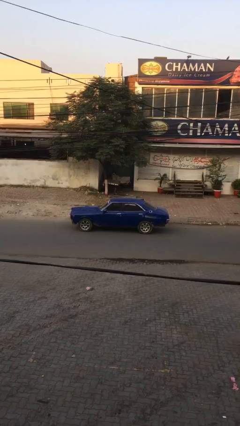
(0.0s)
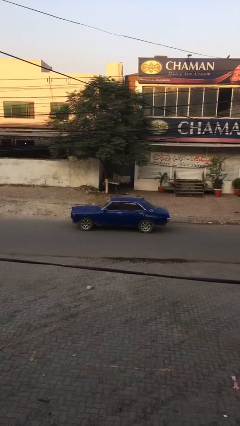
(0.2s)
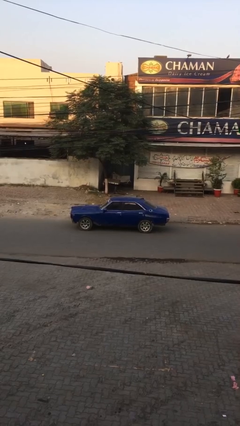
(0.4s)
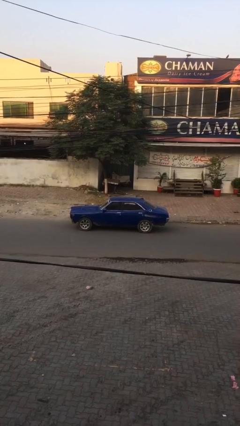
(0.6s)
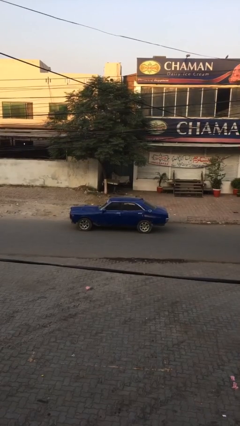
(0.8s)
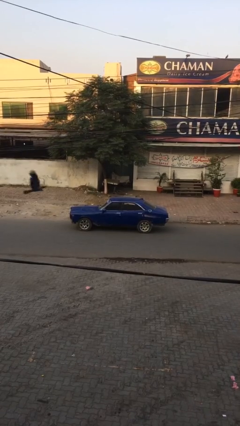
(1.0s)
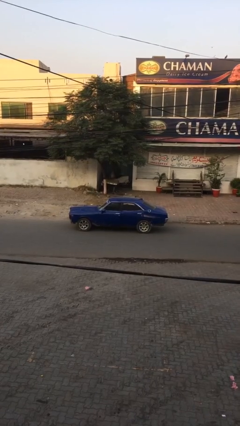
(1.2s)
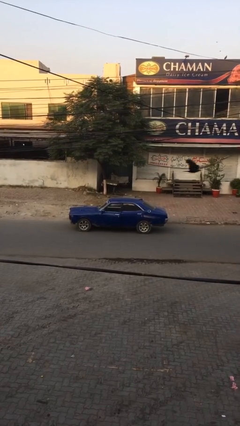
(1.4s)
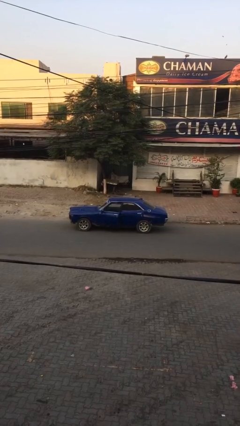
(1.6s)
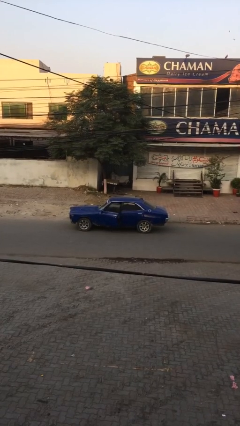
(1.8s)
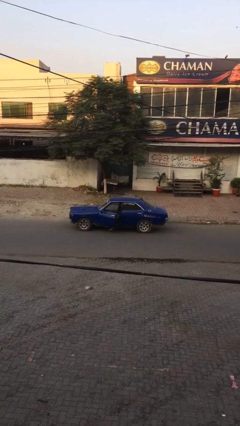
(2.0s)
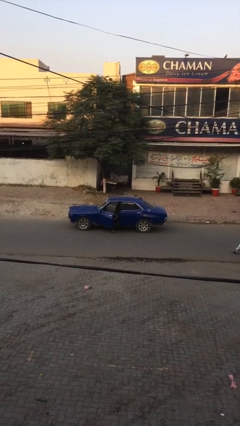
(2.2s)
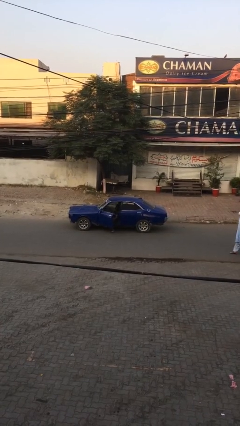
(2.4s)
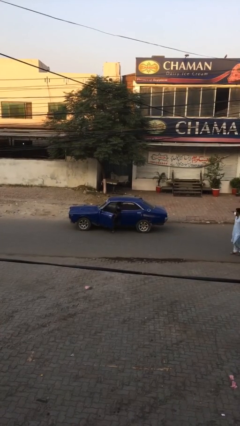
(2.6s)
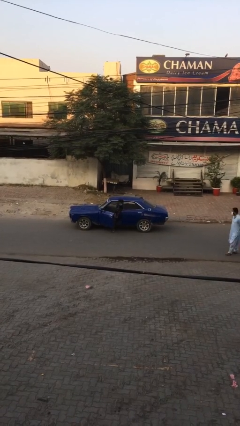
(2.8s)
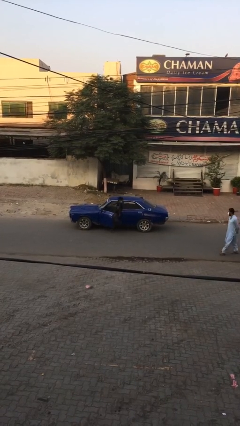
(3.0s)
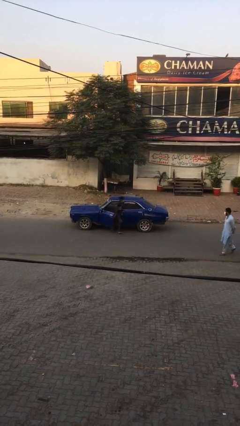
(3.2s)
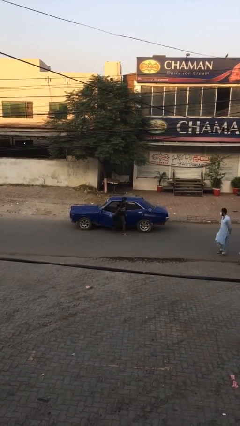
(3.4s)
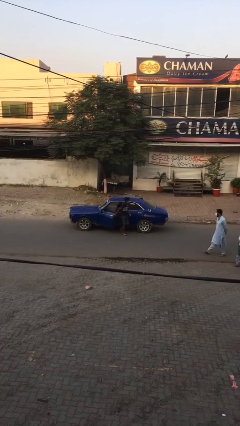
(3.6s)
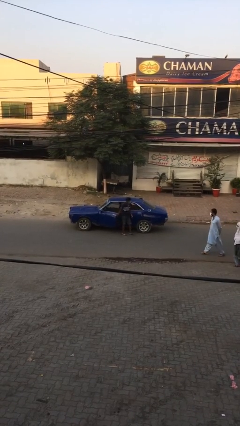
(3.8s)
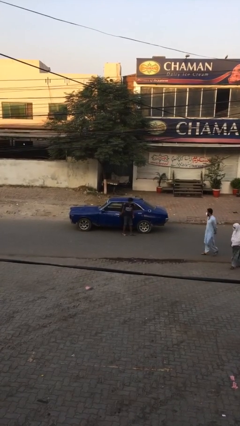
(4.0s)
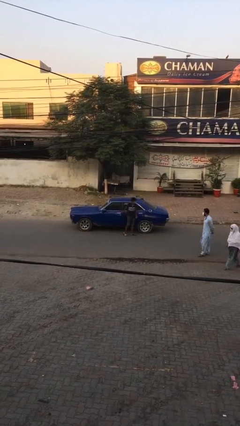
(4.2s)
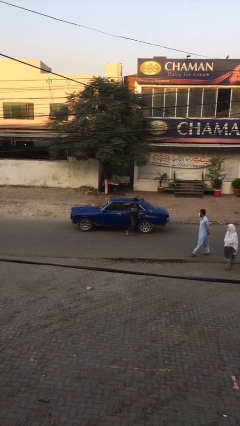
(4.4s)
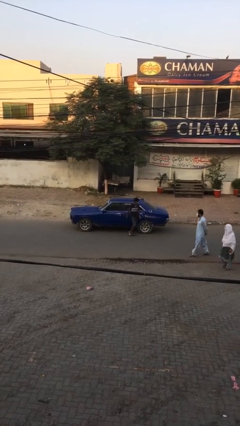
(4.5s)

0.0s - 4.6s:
car drops off person

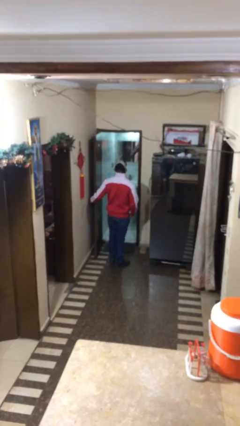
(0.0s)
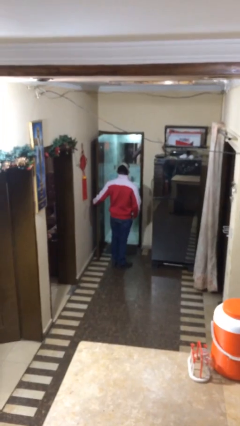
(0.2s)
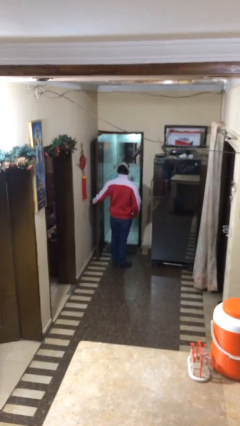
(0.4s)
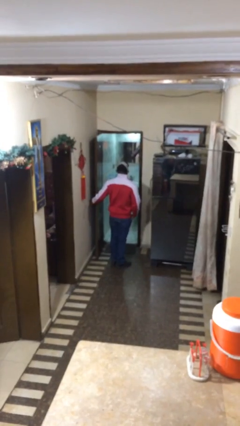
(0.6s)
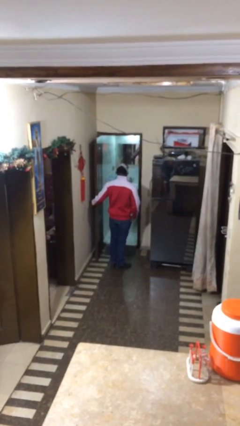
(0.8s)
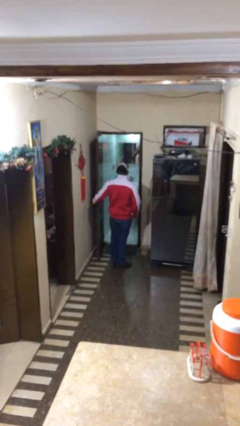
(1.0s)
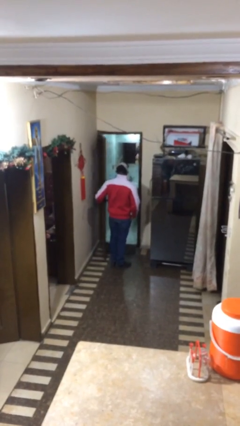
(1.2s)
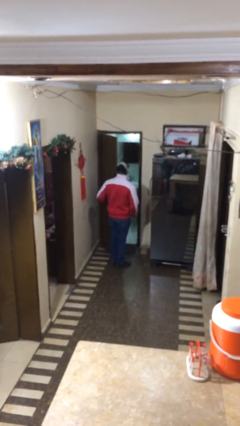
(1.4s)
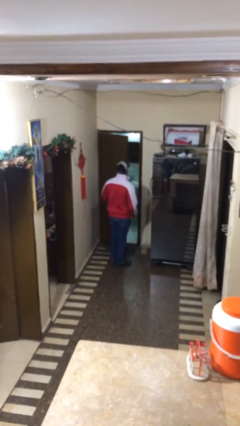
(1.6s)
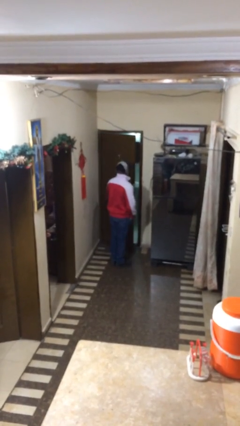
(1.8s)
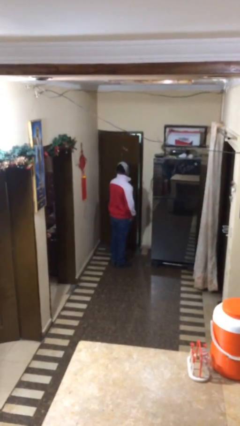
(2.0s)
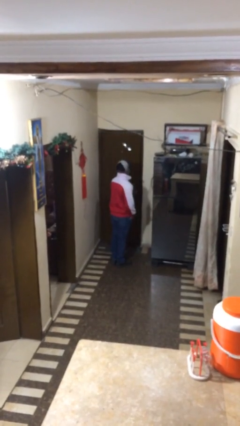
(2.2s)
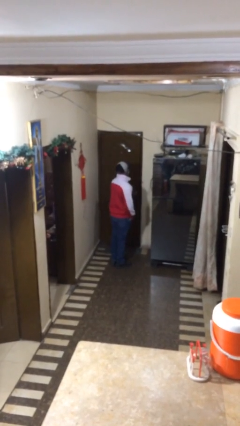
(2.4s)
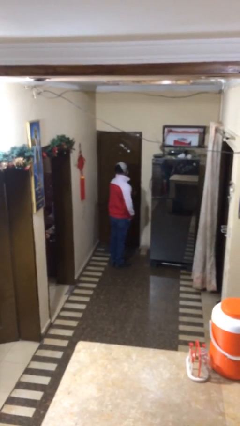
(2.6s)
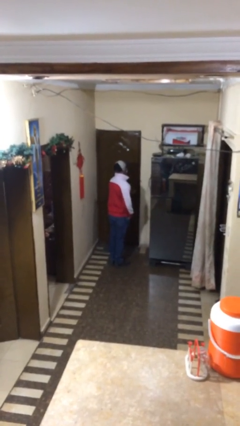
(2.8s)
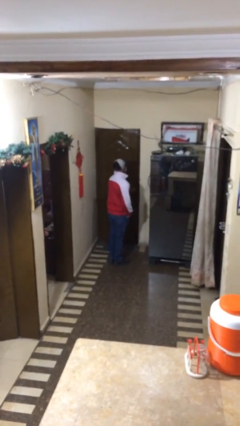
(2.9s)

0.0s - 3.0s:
person closes facility door

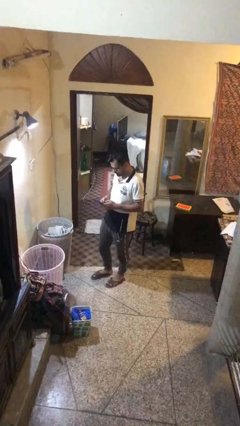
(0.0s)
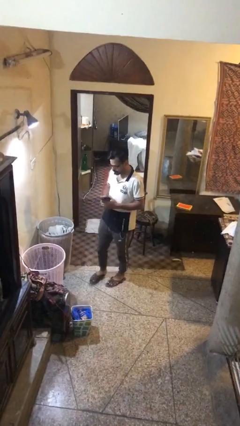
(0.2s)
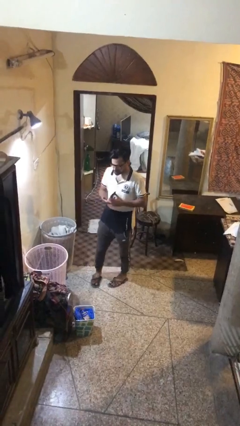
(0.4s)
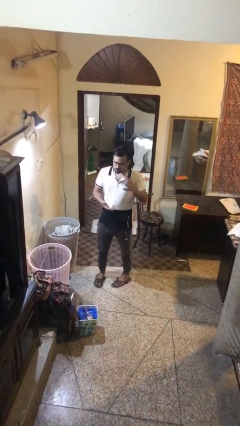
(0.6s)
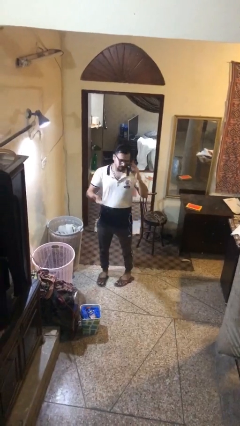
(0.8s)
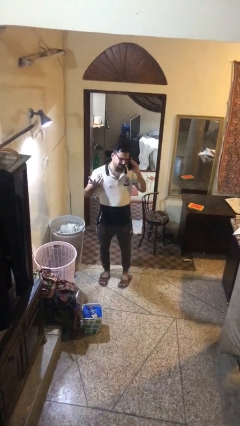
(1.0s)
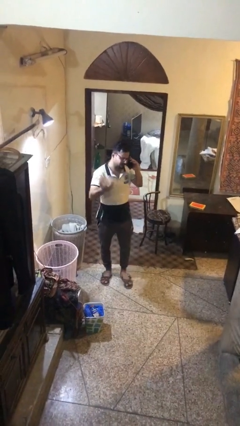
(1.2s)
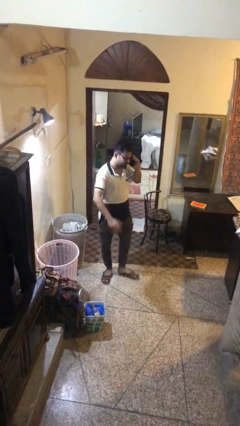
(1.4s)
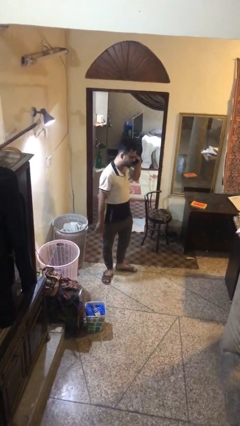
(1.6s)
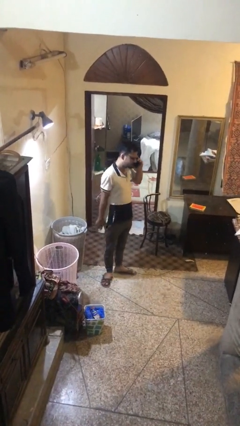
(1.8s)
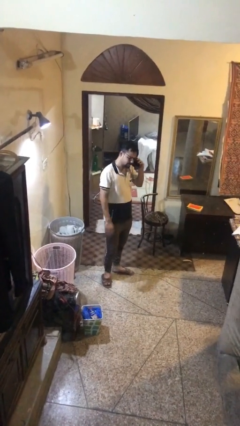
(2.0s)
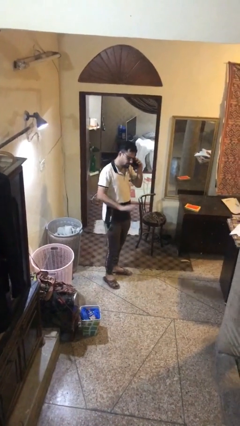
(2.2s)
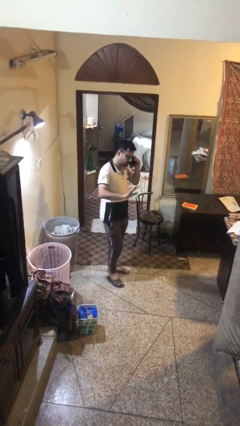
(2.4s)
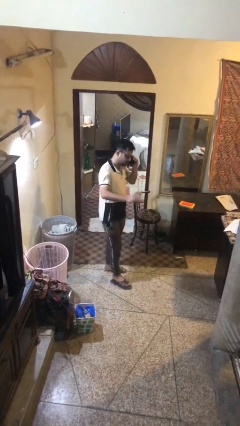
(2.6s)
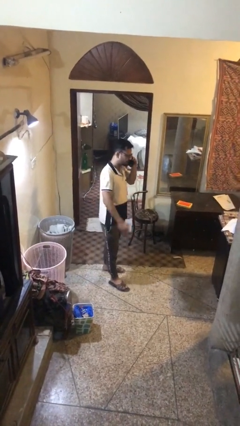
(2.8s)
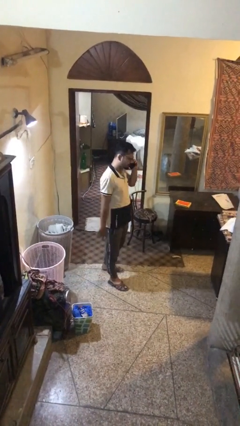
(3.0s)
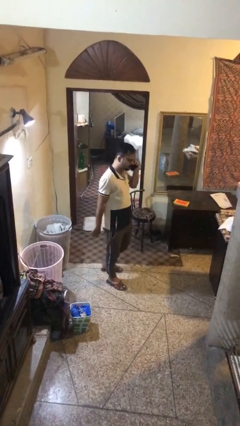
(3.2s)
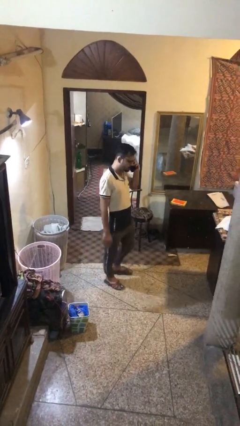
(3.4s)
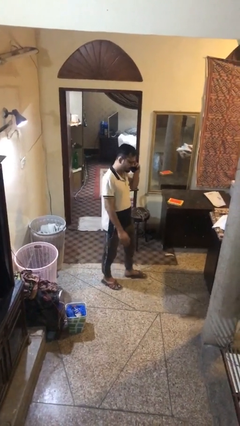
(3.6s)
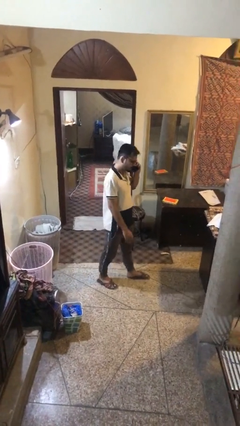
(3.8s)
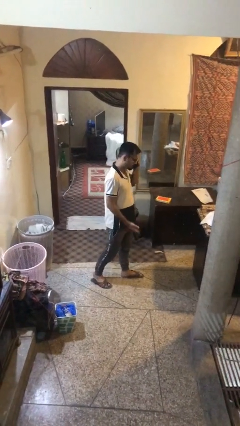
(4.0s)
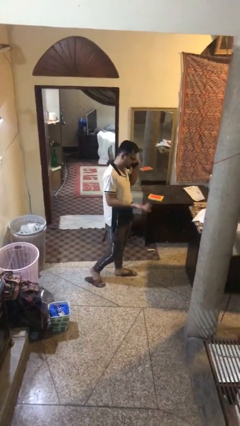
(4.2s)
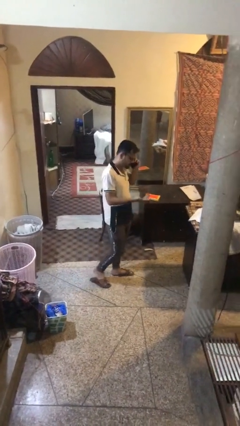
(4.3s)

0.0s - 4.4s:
person talks on phone

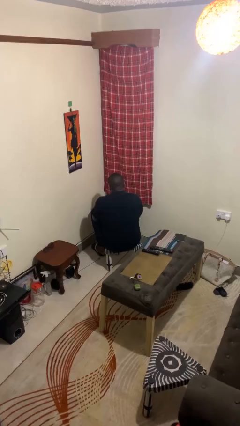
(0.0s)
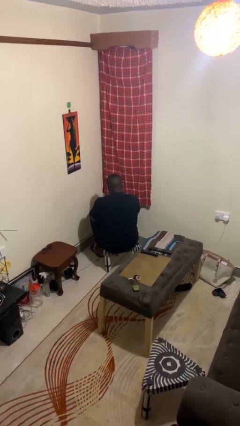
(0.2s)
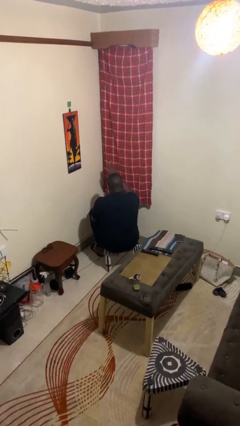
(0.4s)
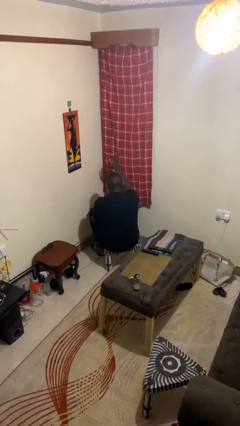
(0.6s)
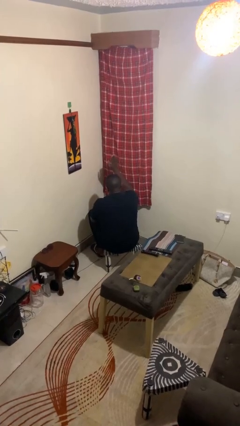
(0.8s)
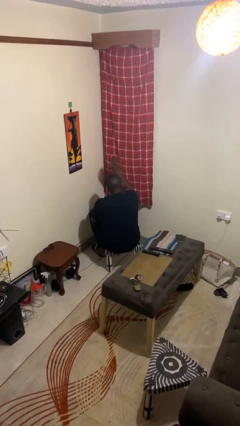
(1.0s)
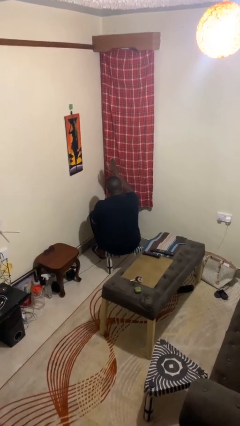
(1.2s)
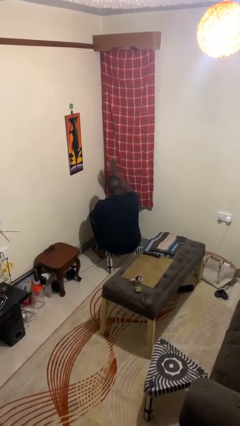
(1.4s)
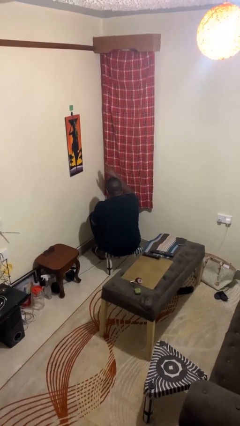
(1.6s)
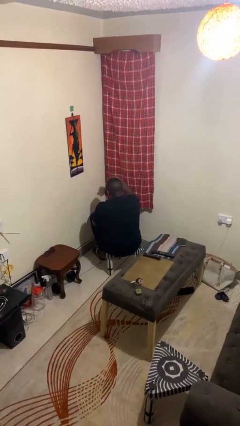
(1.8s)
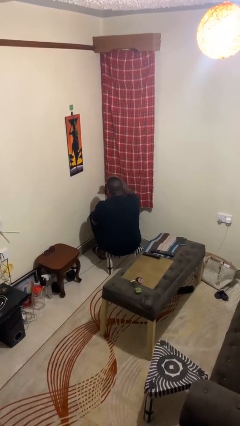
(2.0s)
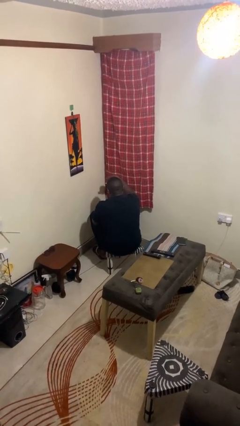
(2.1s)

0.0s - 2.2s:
person gestures swipe up

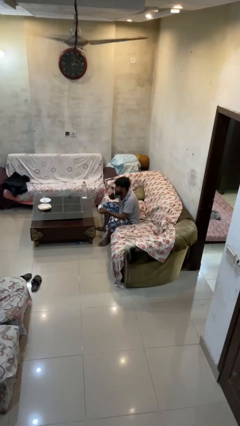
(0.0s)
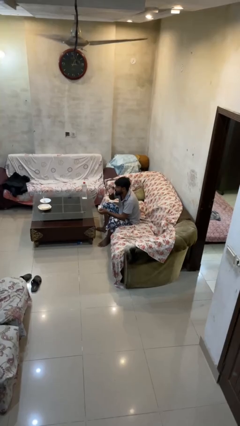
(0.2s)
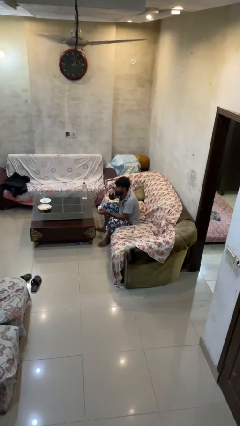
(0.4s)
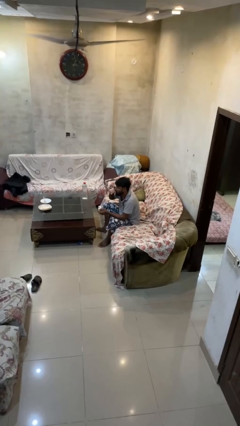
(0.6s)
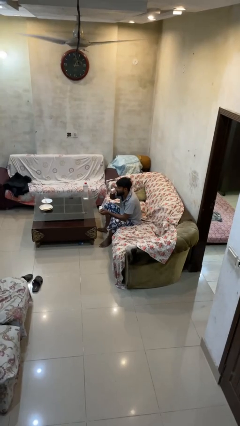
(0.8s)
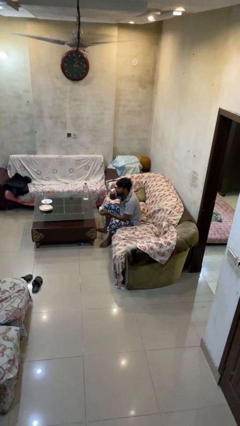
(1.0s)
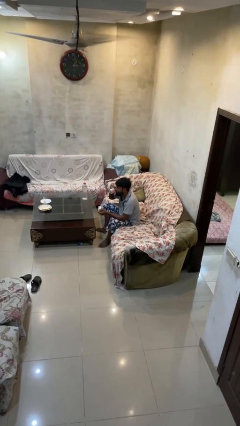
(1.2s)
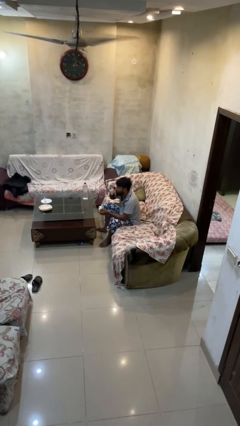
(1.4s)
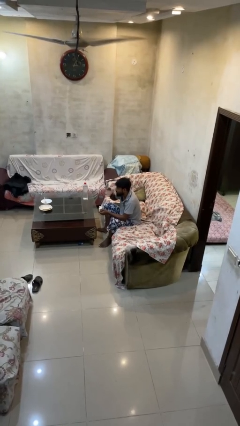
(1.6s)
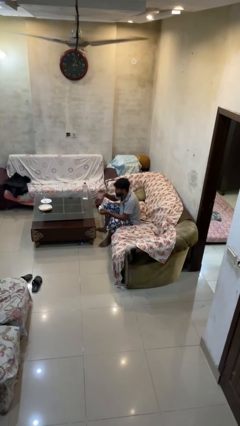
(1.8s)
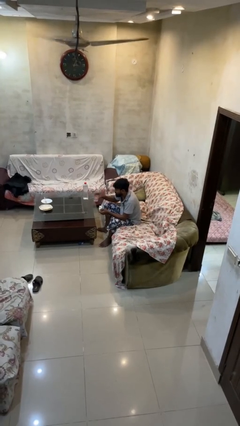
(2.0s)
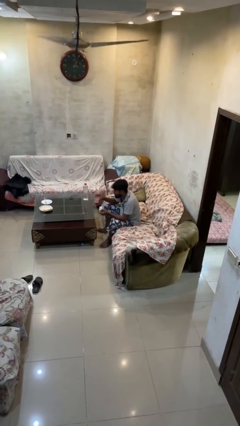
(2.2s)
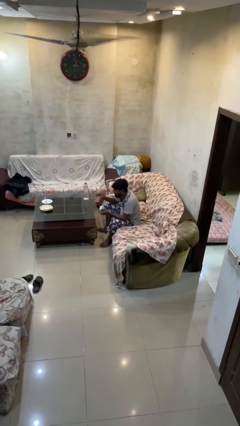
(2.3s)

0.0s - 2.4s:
person drinks from cup

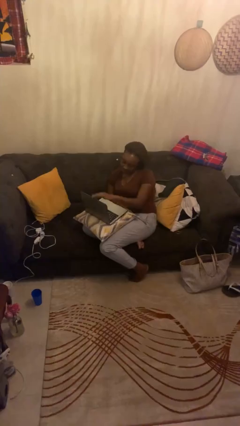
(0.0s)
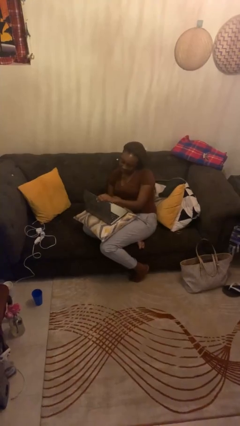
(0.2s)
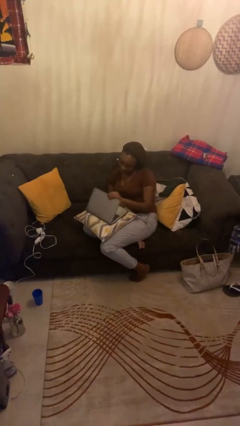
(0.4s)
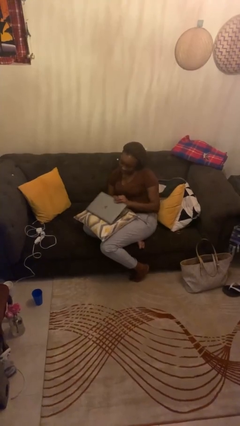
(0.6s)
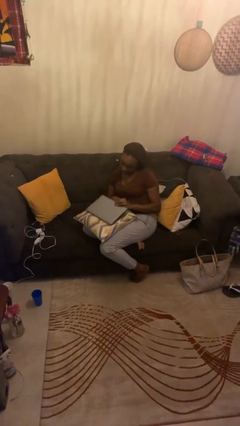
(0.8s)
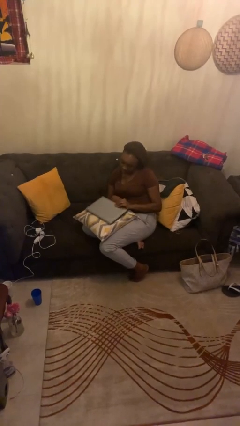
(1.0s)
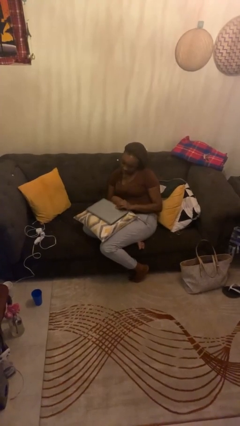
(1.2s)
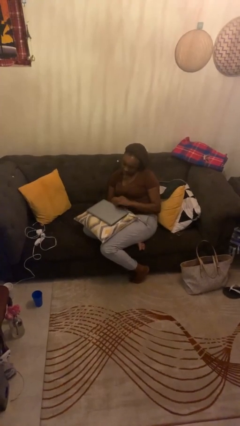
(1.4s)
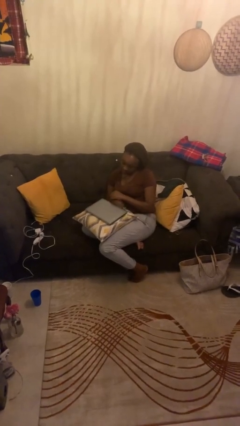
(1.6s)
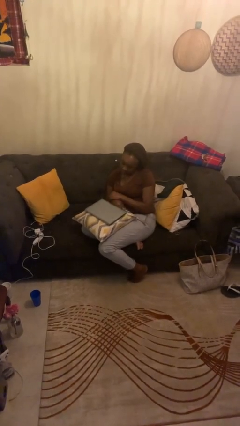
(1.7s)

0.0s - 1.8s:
person closes laptop
